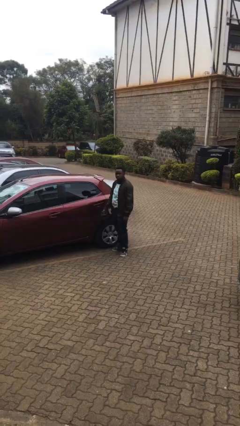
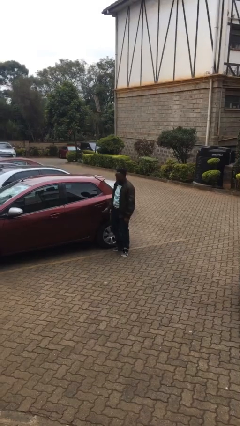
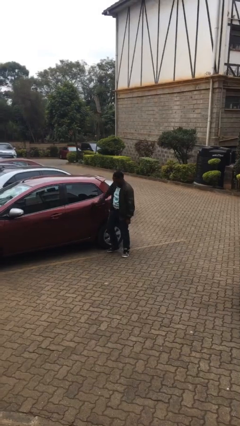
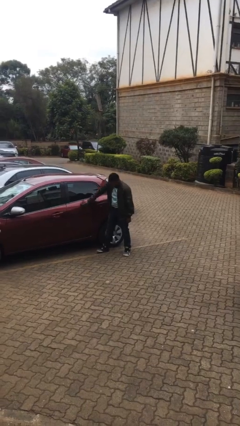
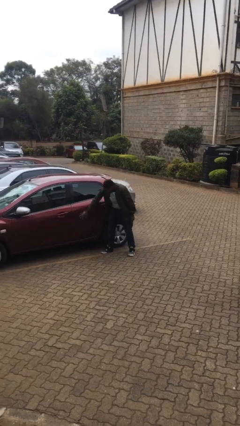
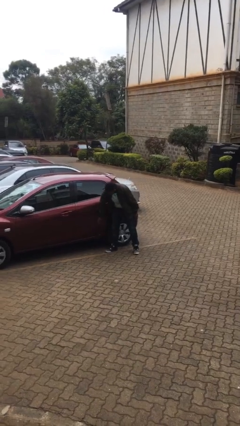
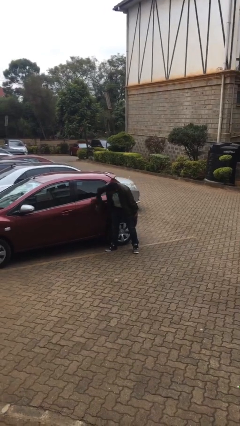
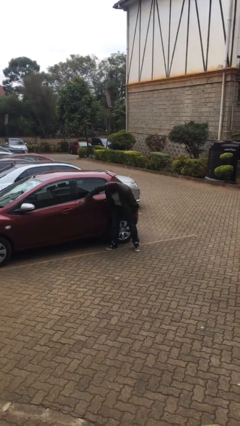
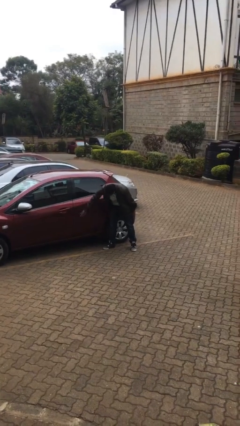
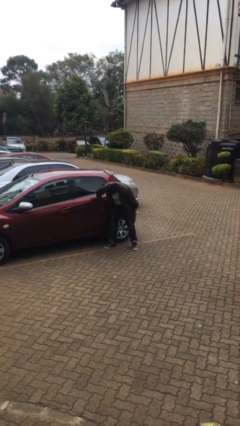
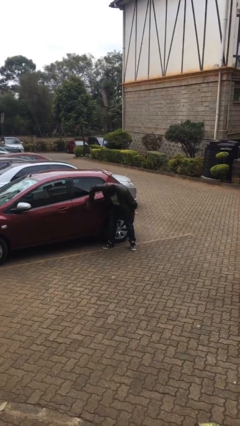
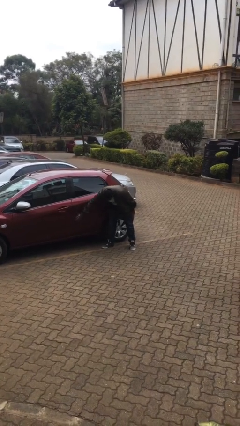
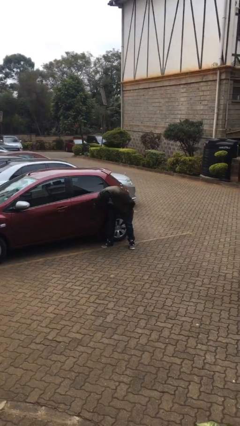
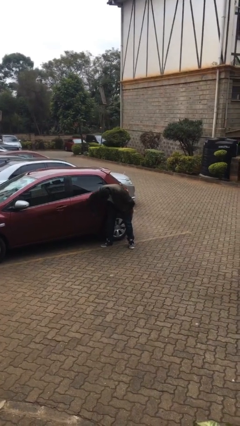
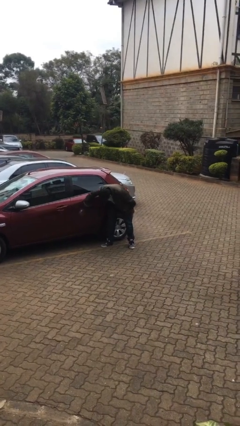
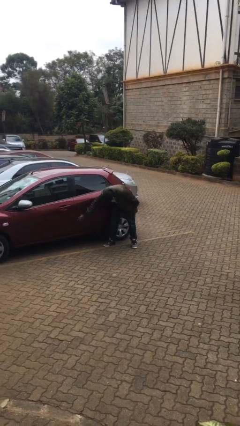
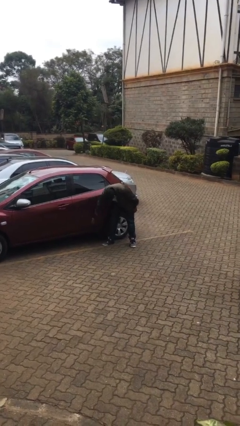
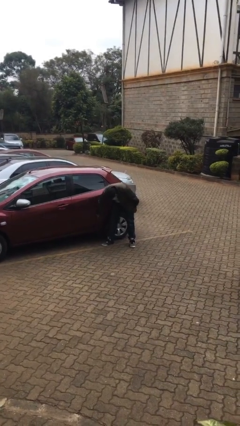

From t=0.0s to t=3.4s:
person polishes car with rag

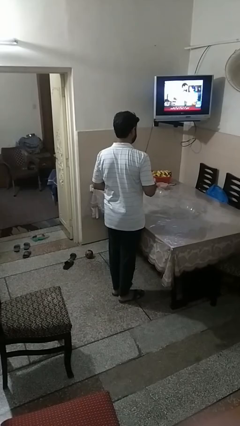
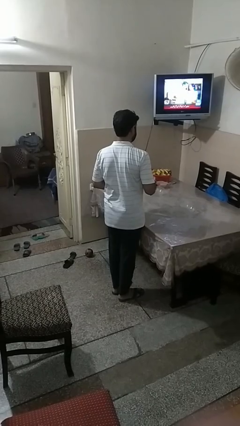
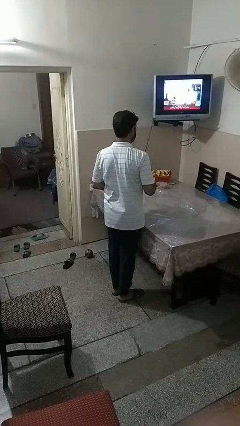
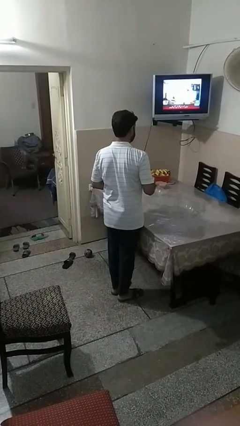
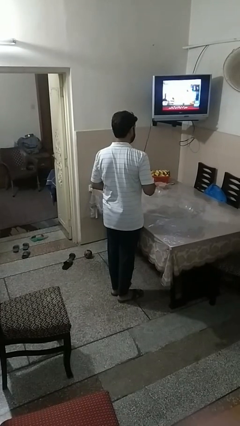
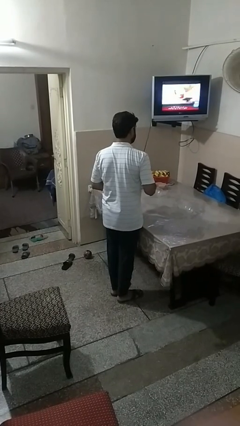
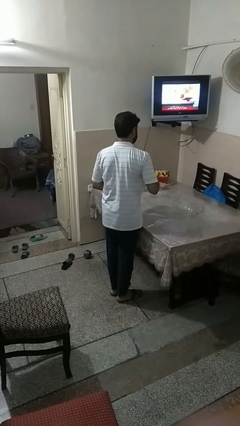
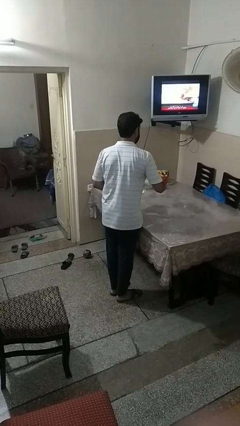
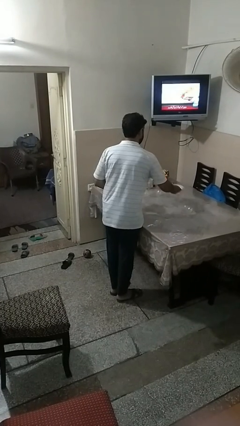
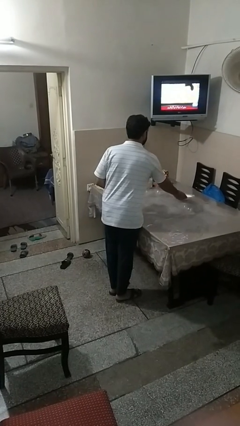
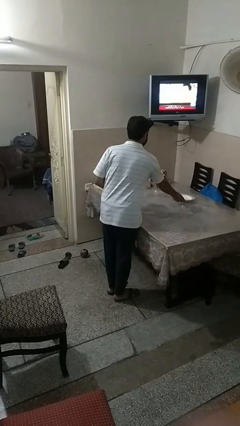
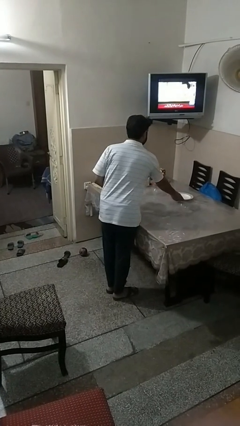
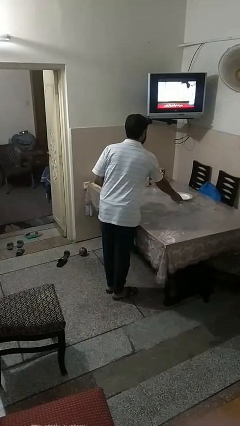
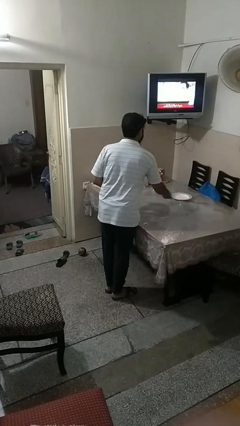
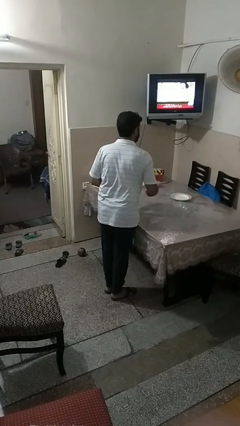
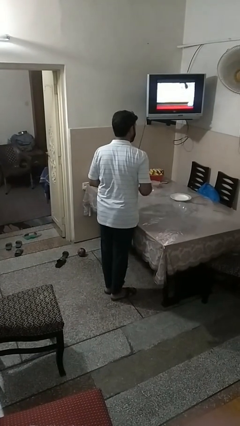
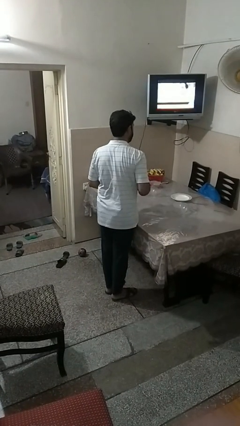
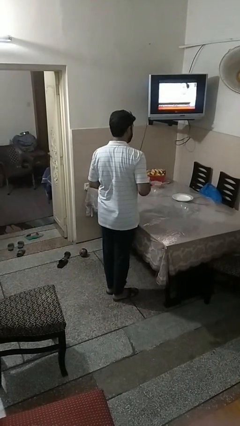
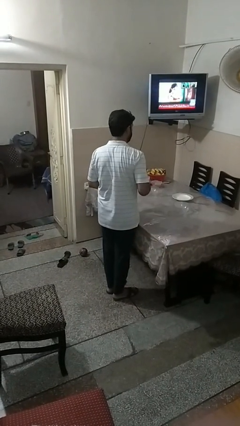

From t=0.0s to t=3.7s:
person sets table

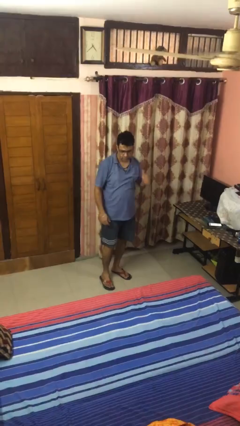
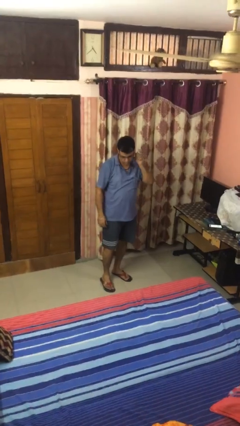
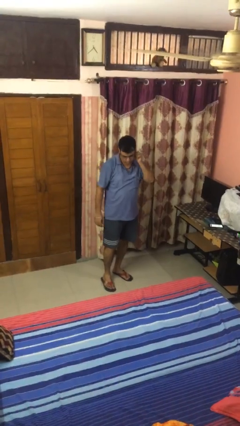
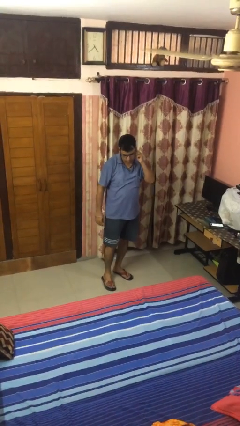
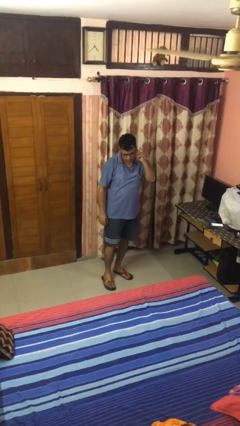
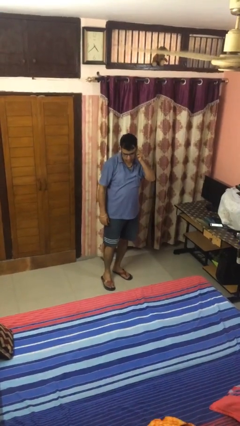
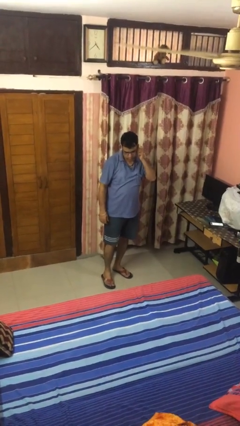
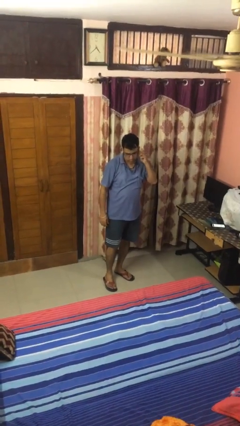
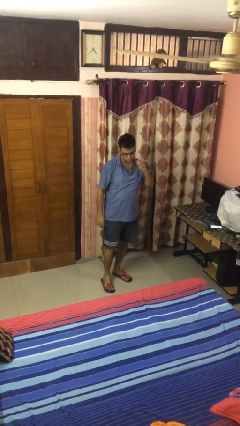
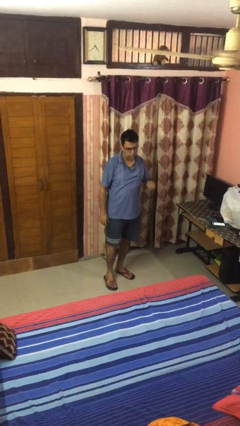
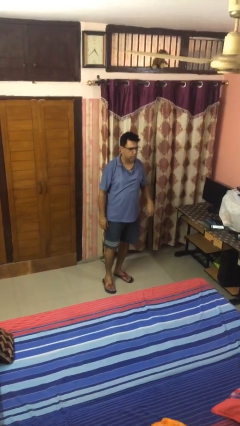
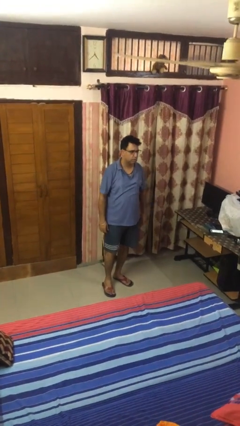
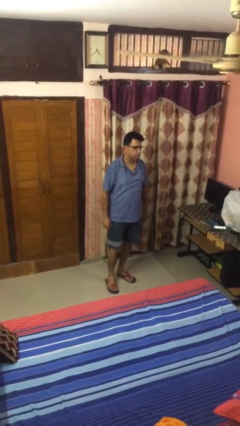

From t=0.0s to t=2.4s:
person touches earlobe

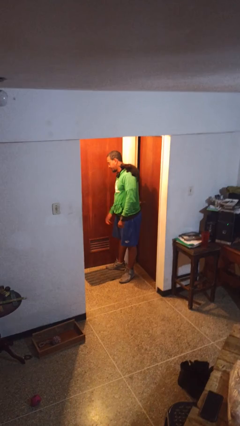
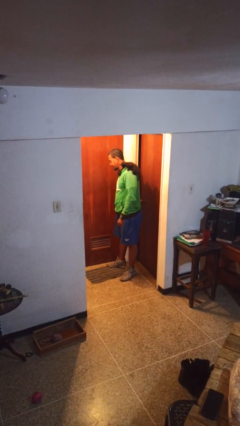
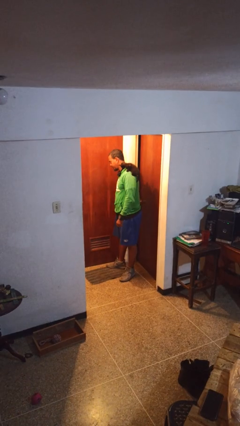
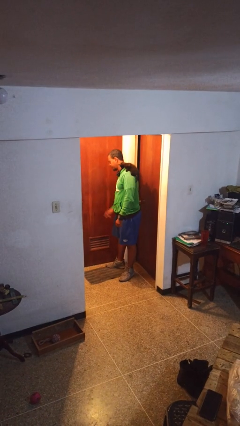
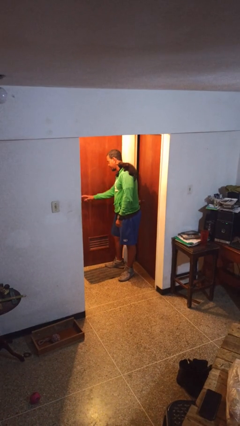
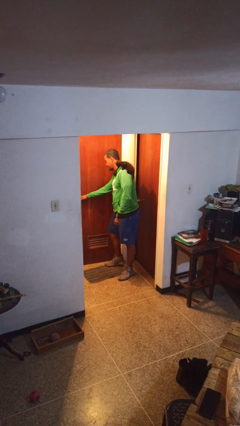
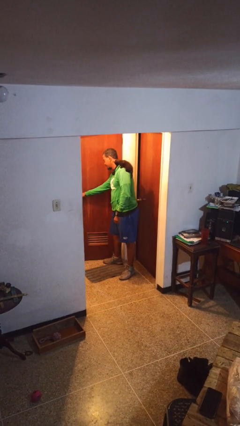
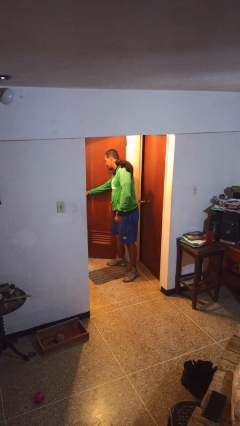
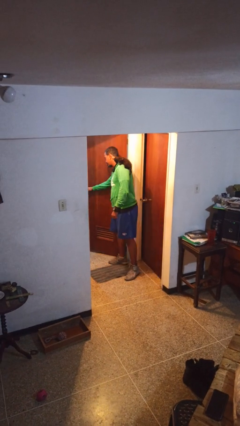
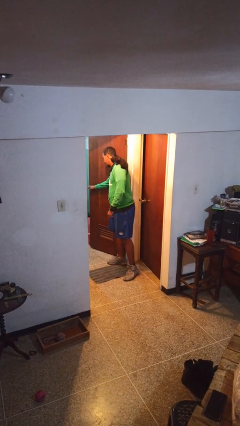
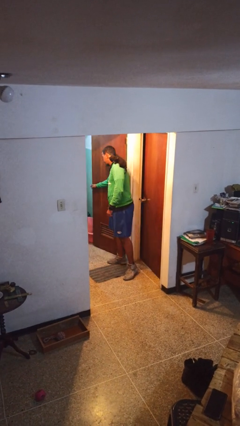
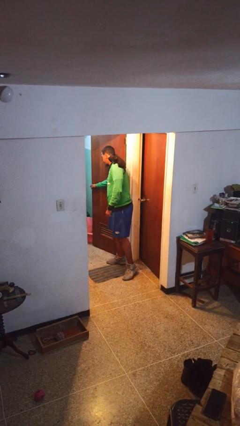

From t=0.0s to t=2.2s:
person opens facility door

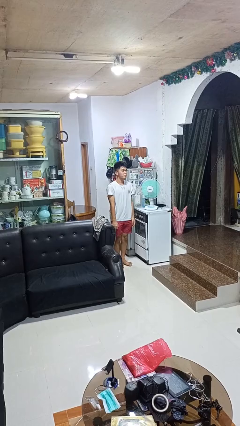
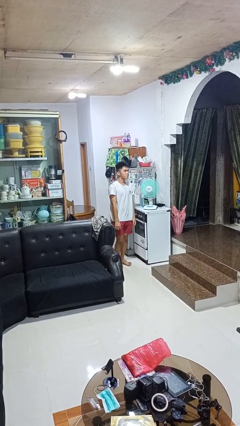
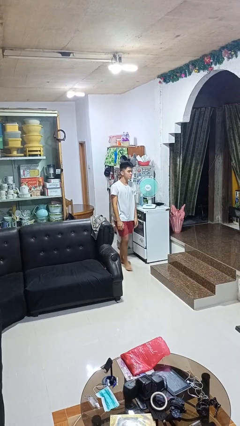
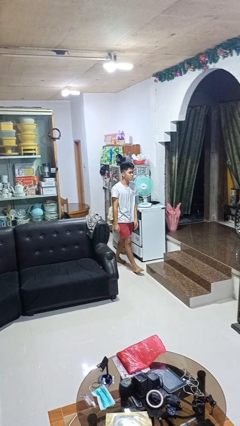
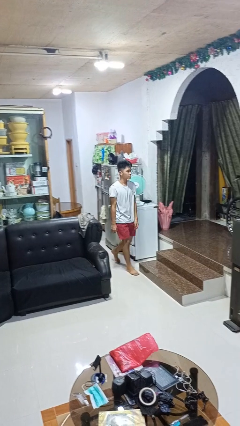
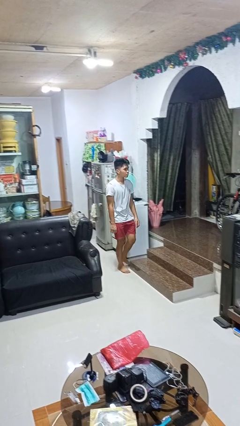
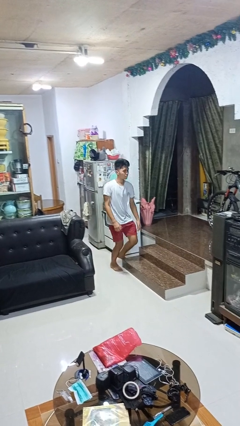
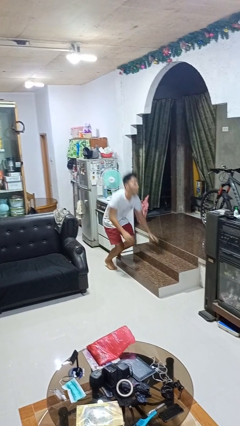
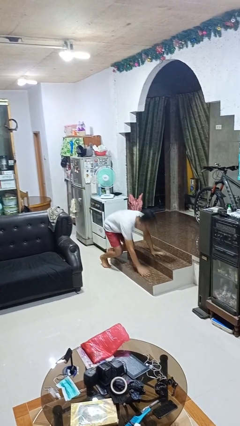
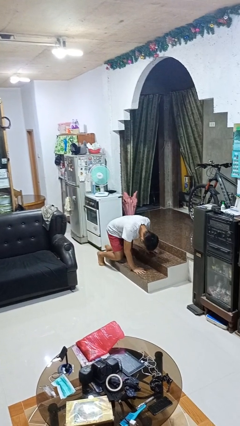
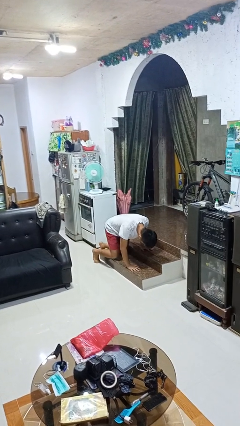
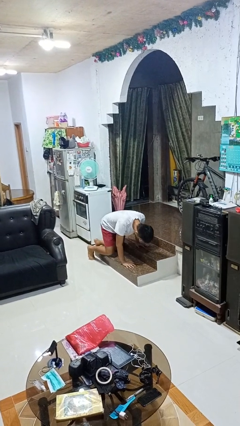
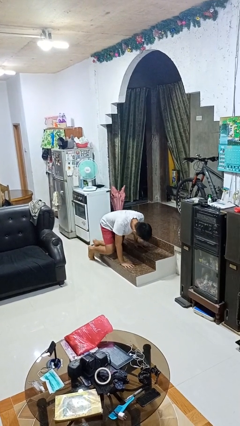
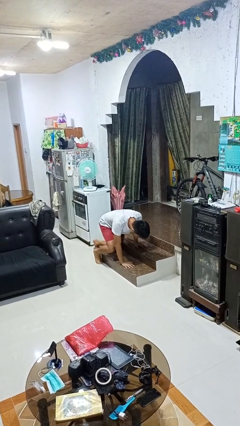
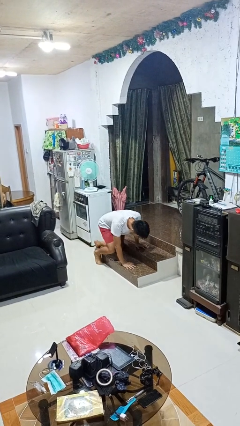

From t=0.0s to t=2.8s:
person trips on object on floor

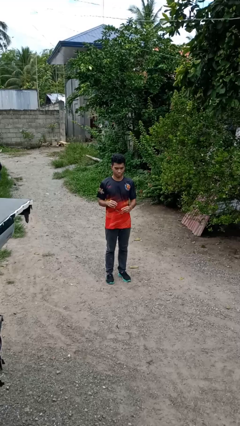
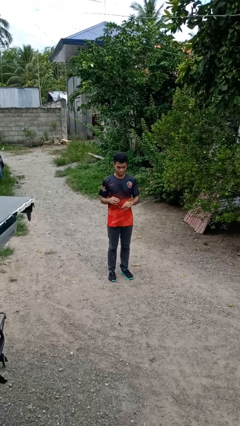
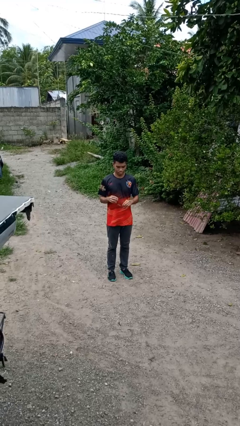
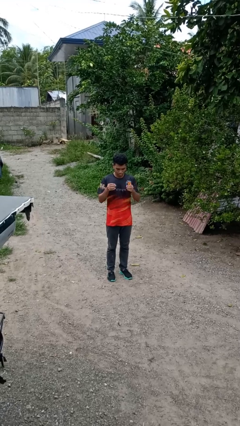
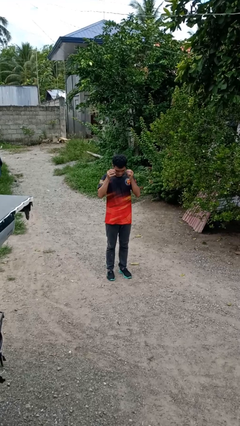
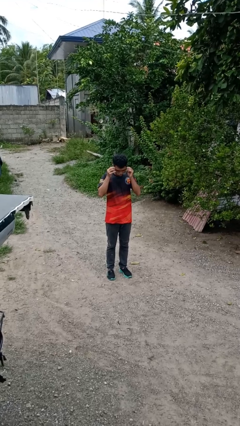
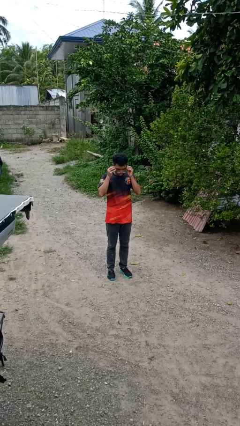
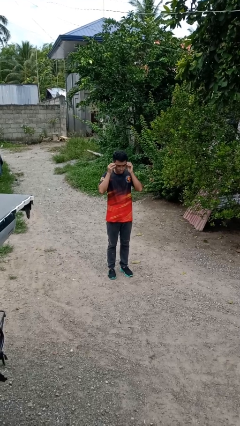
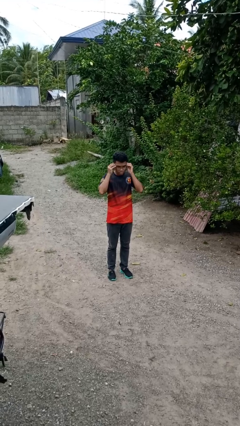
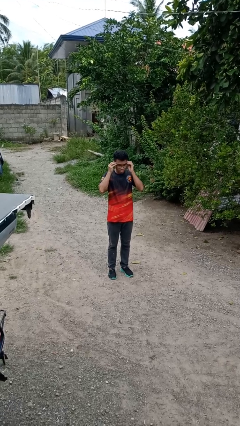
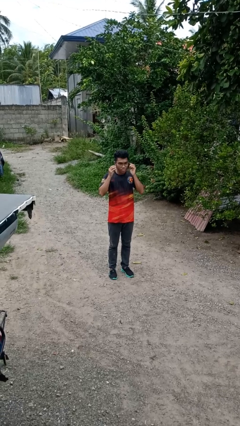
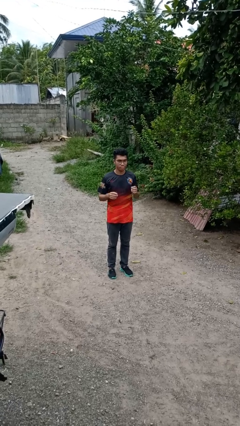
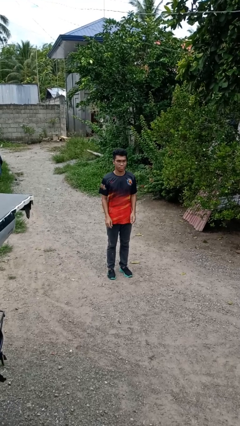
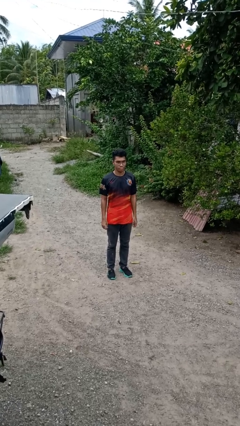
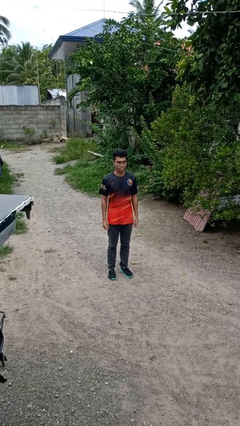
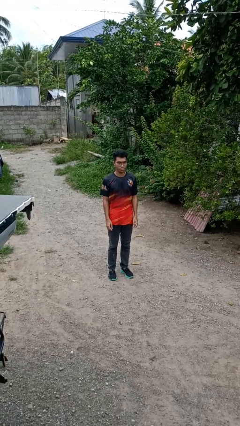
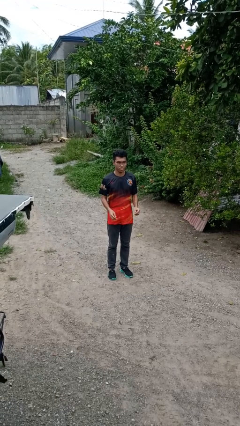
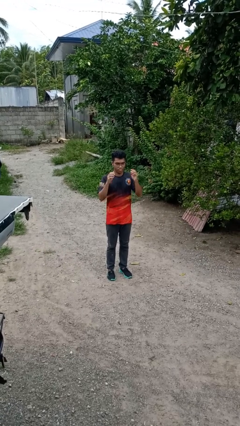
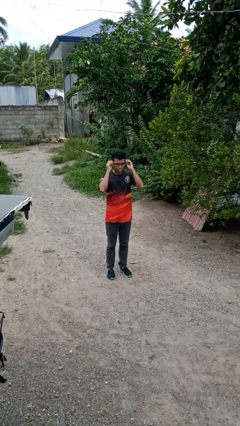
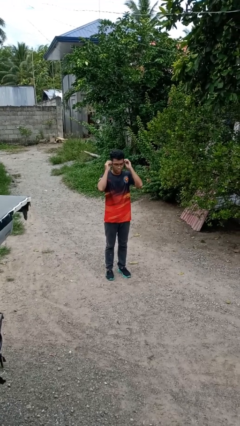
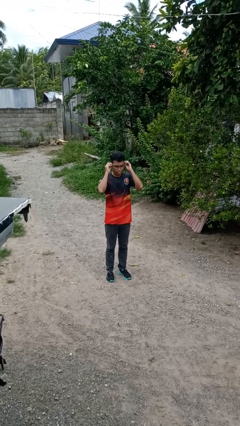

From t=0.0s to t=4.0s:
person puts on glasses
